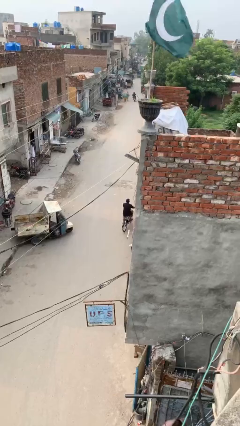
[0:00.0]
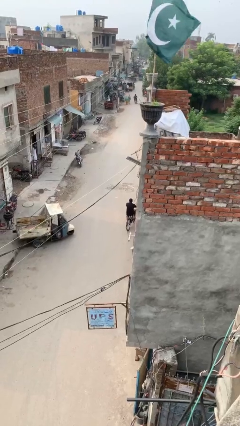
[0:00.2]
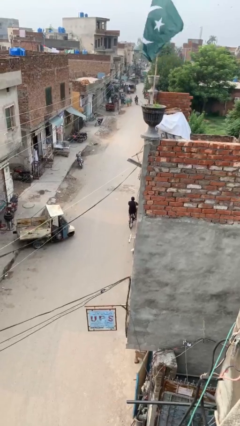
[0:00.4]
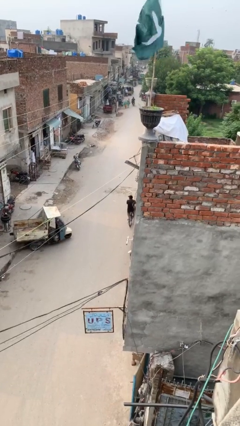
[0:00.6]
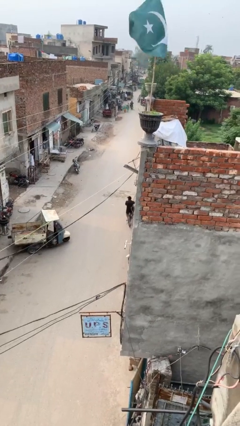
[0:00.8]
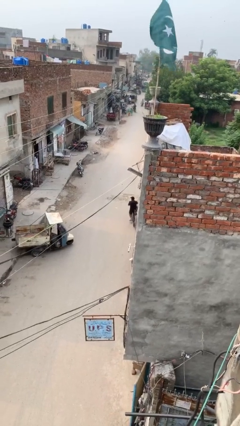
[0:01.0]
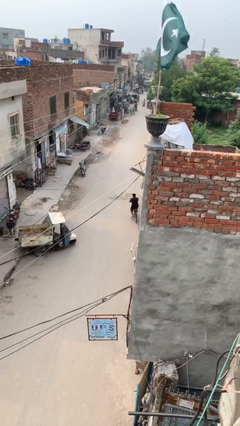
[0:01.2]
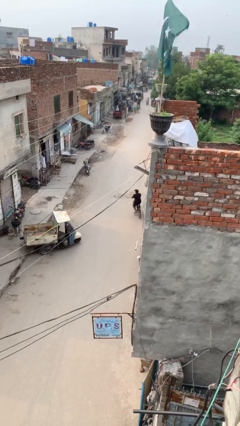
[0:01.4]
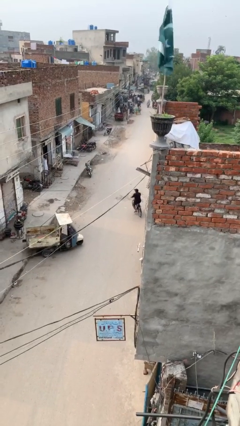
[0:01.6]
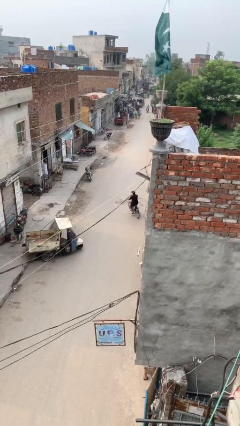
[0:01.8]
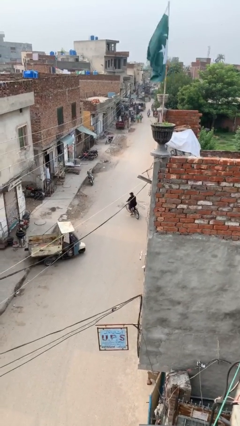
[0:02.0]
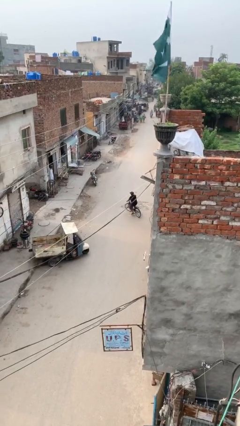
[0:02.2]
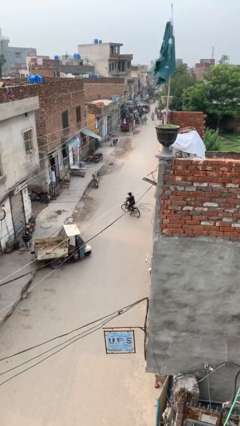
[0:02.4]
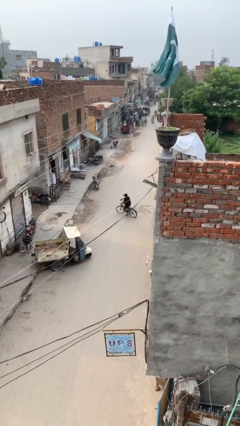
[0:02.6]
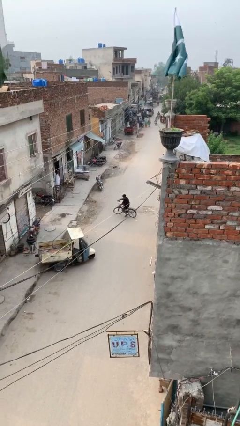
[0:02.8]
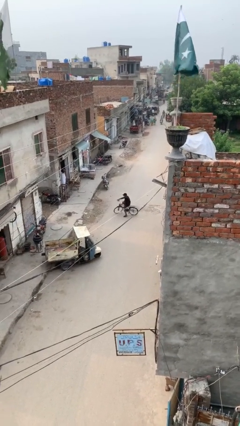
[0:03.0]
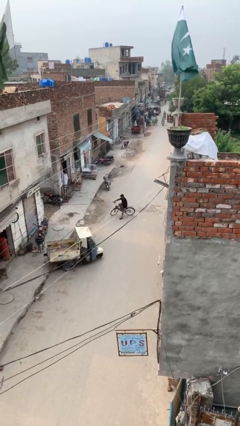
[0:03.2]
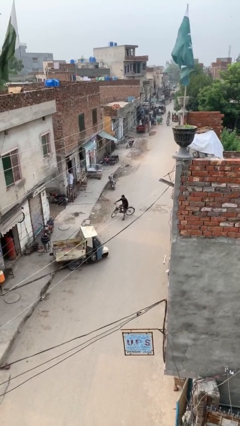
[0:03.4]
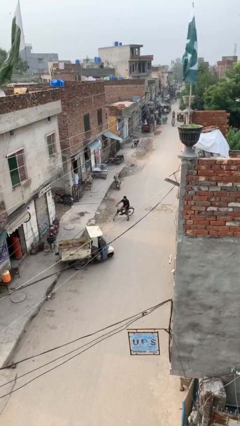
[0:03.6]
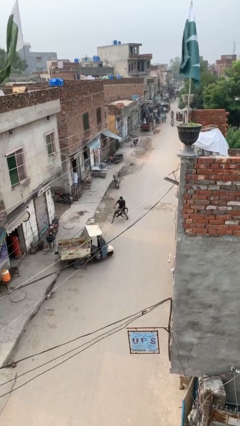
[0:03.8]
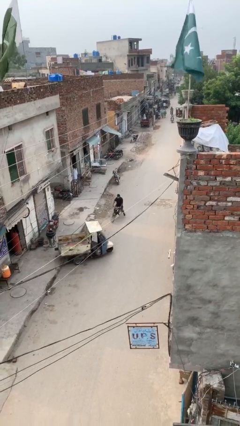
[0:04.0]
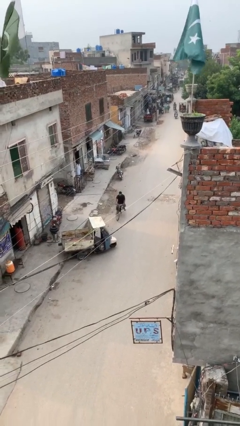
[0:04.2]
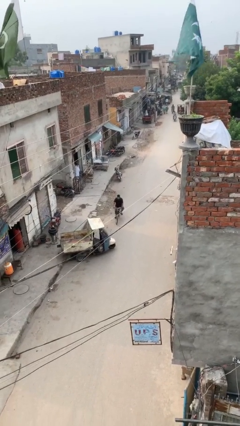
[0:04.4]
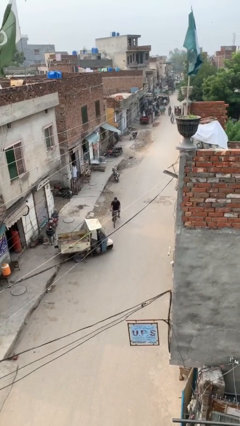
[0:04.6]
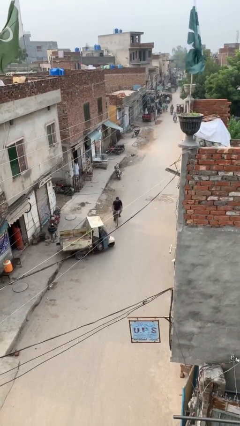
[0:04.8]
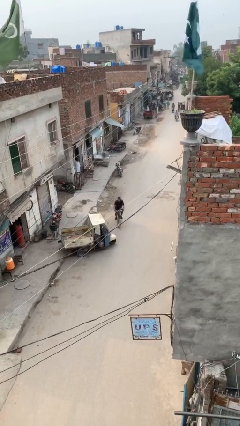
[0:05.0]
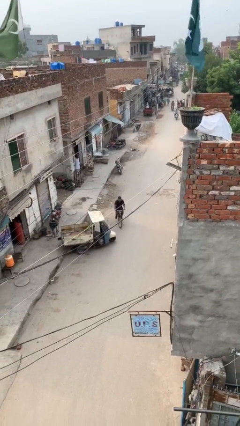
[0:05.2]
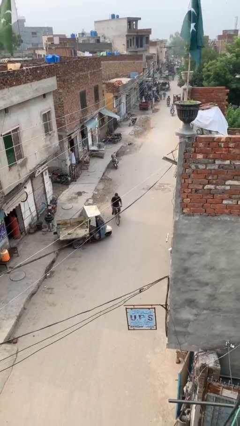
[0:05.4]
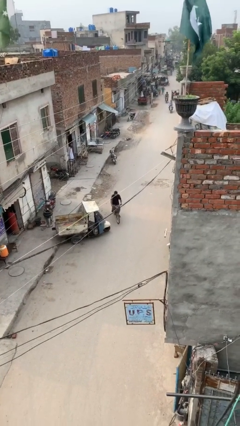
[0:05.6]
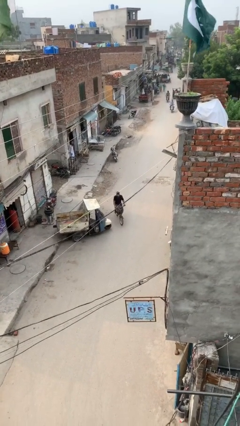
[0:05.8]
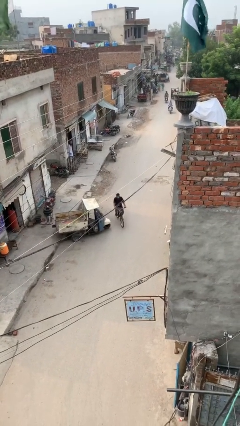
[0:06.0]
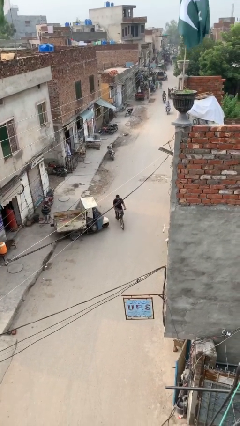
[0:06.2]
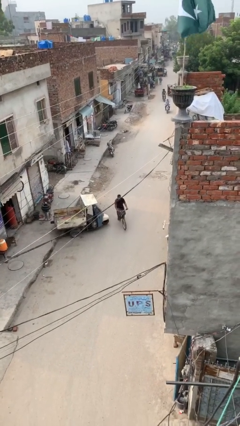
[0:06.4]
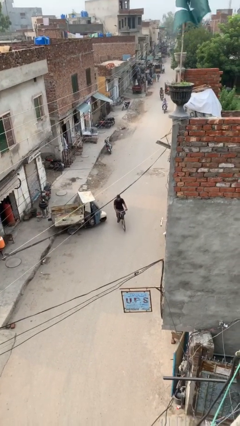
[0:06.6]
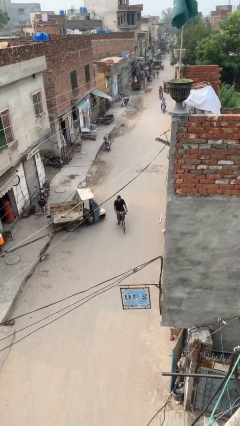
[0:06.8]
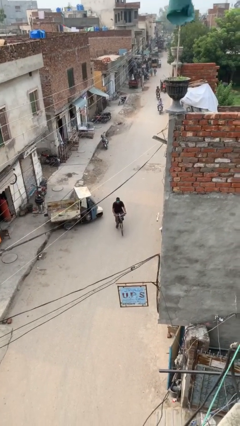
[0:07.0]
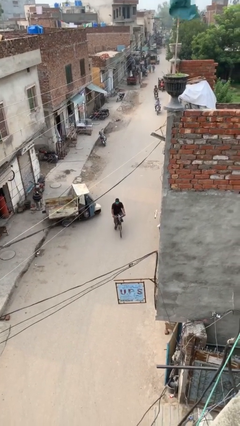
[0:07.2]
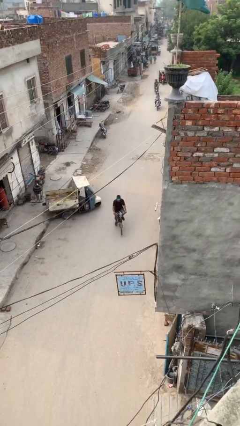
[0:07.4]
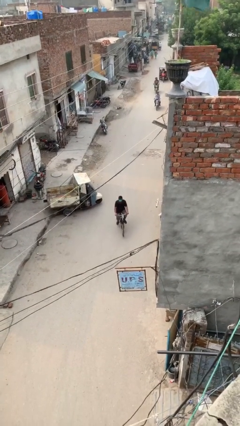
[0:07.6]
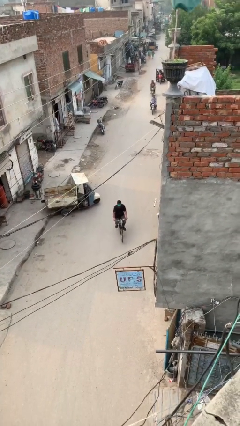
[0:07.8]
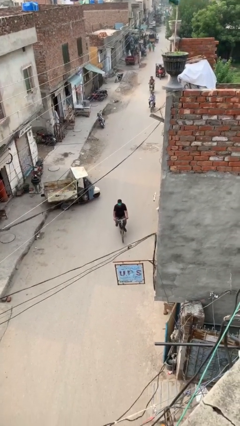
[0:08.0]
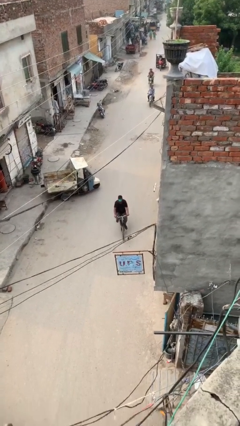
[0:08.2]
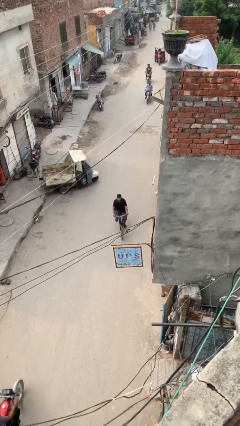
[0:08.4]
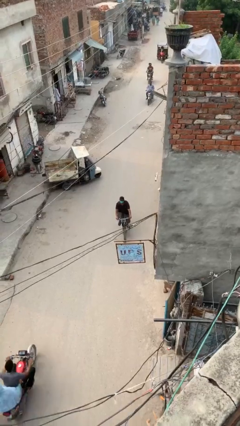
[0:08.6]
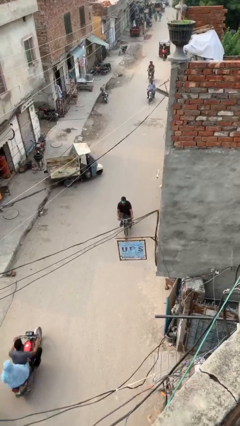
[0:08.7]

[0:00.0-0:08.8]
person rides bicycle

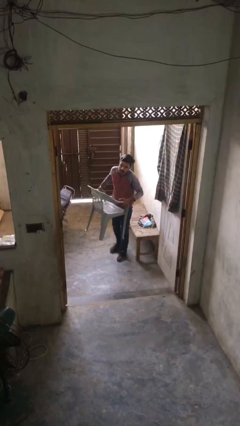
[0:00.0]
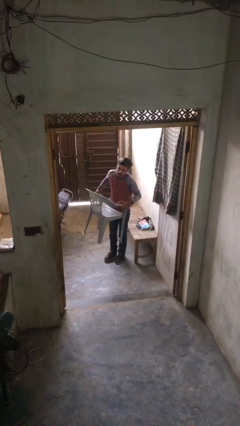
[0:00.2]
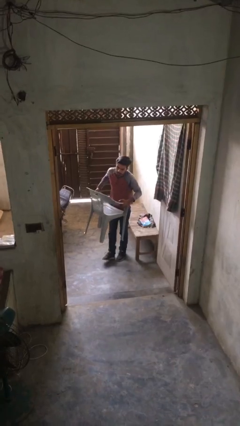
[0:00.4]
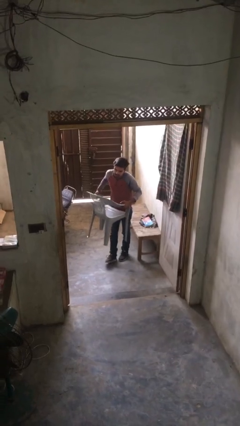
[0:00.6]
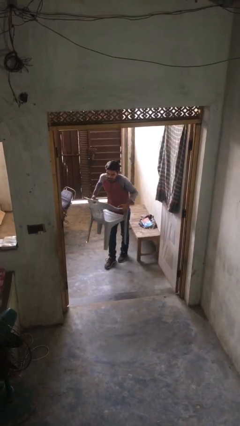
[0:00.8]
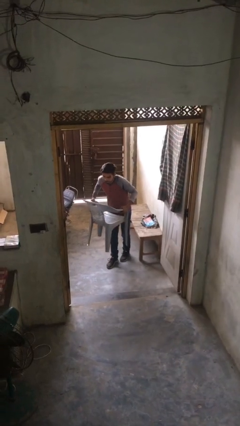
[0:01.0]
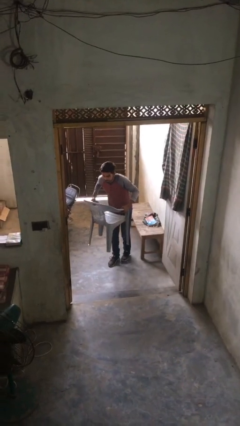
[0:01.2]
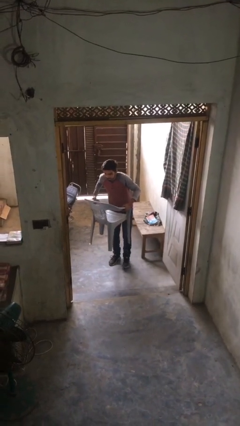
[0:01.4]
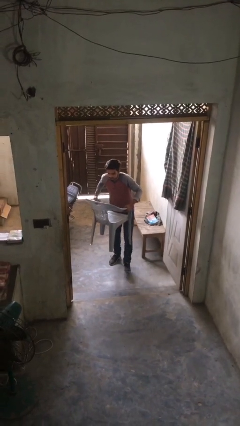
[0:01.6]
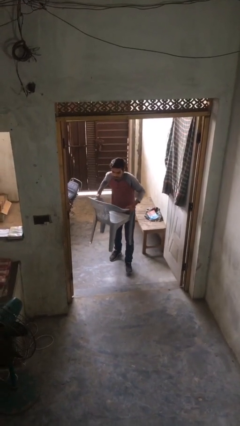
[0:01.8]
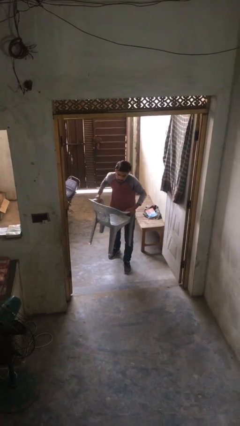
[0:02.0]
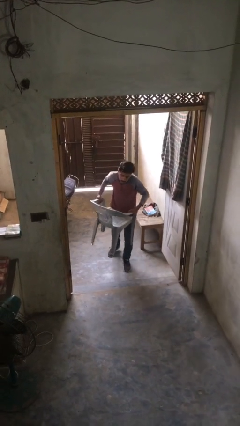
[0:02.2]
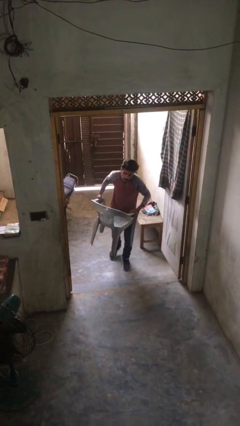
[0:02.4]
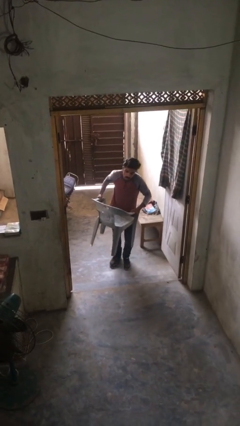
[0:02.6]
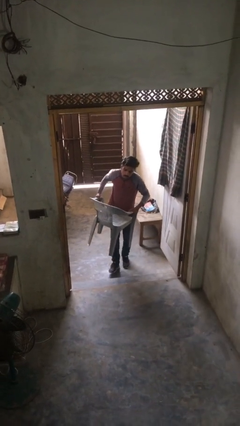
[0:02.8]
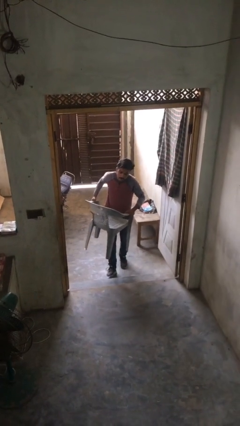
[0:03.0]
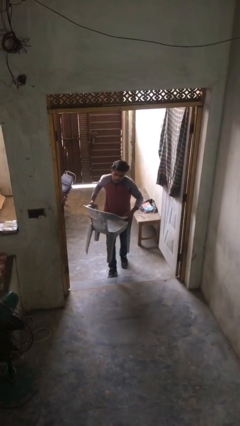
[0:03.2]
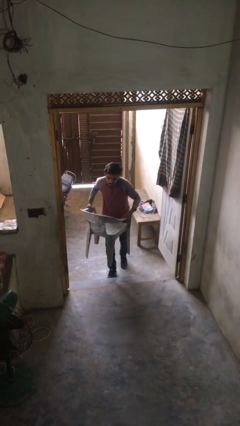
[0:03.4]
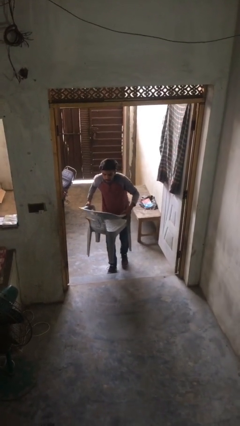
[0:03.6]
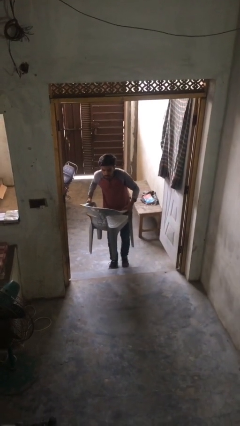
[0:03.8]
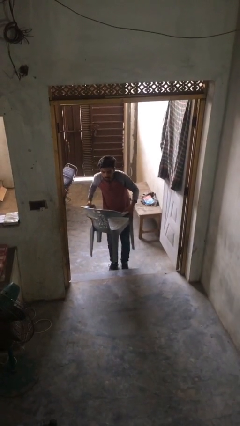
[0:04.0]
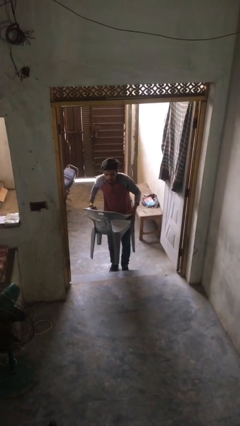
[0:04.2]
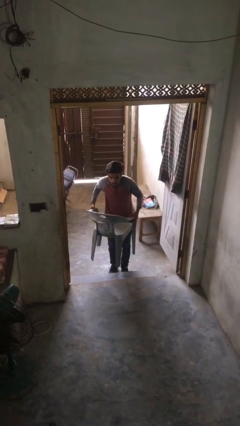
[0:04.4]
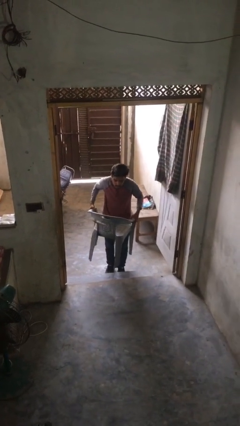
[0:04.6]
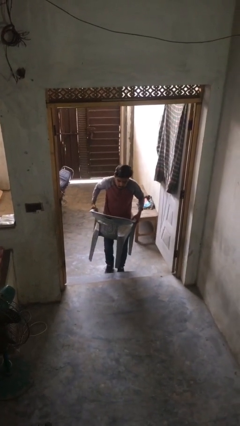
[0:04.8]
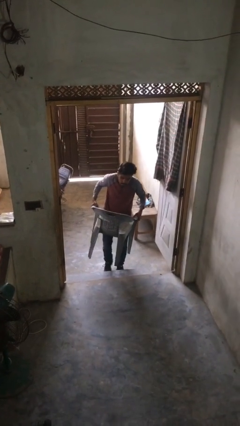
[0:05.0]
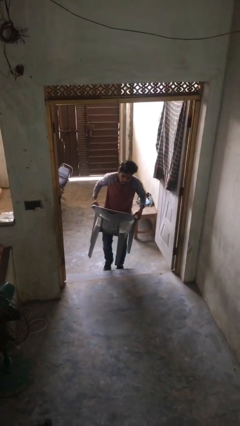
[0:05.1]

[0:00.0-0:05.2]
person carries heavy object

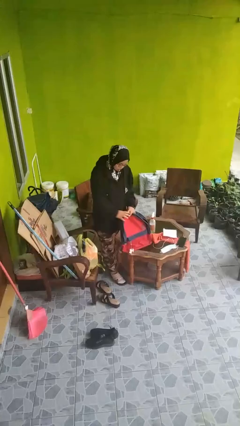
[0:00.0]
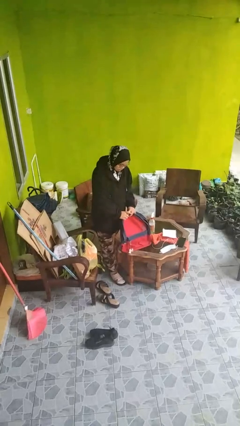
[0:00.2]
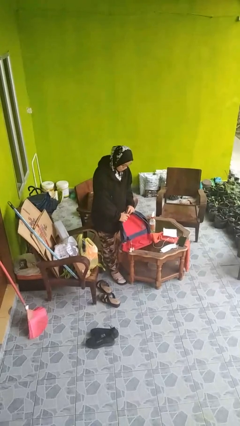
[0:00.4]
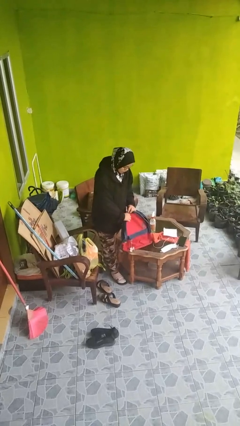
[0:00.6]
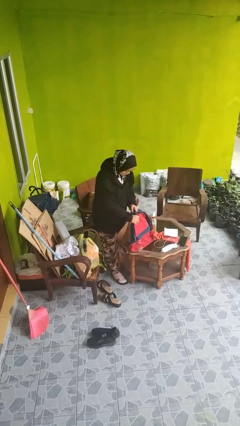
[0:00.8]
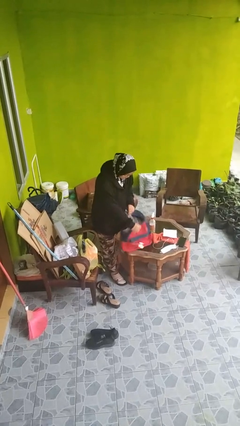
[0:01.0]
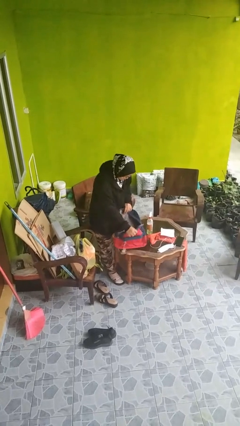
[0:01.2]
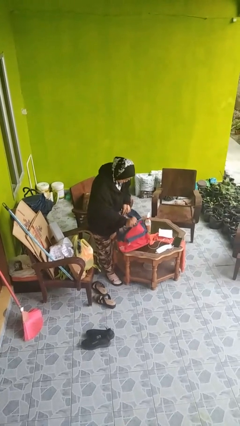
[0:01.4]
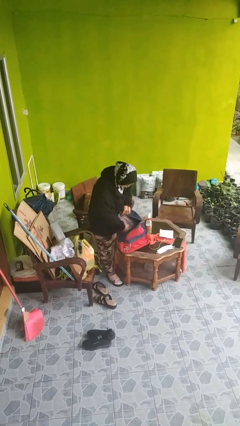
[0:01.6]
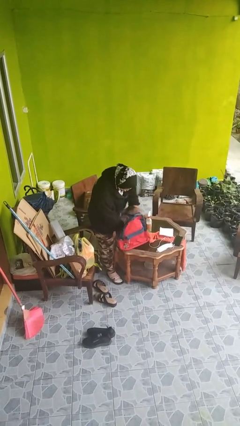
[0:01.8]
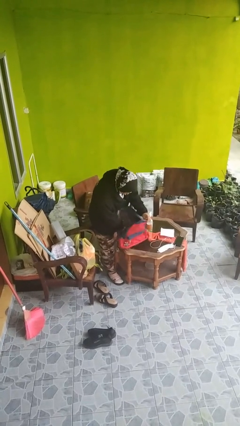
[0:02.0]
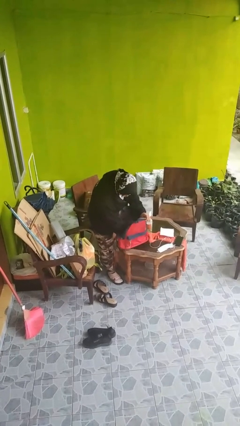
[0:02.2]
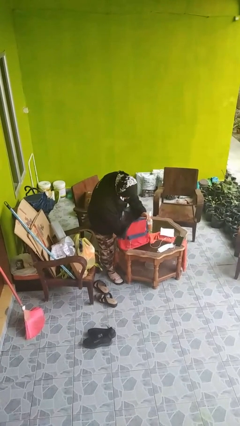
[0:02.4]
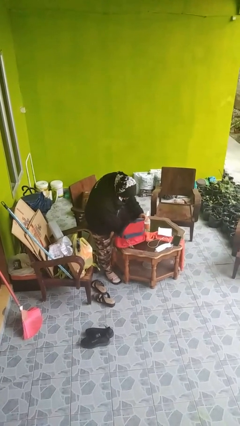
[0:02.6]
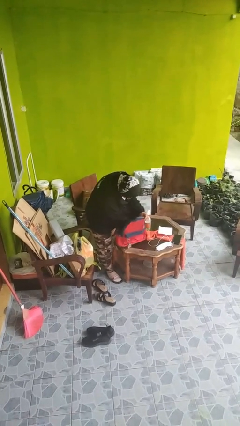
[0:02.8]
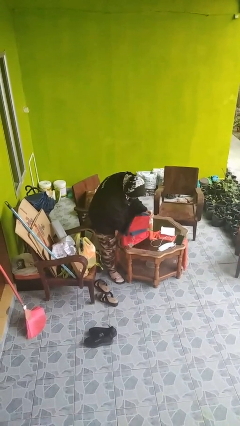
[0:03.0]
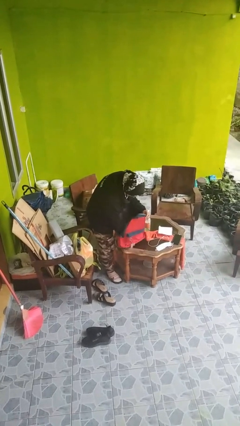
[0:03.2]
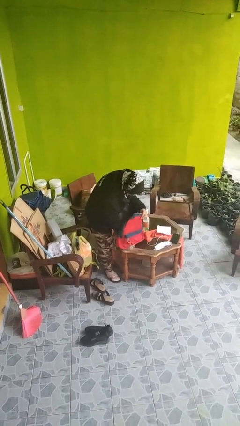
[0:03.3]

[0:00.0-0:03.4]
person searches in backpack

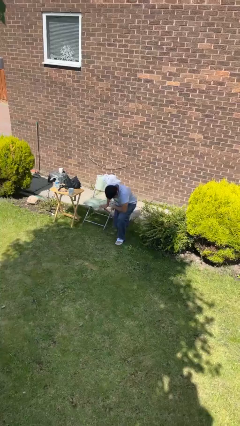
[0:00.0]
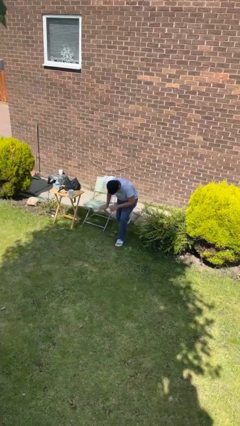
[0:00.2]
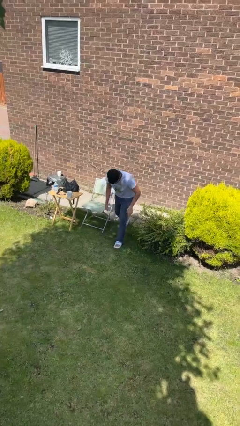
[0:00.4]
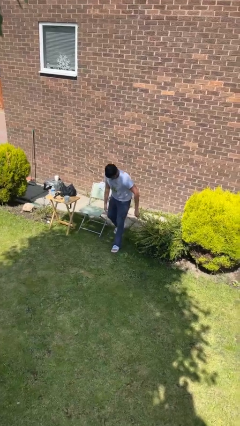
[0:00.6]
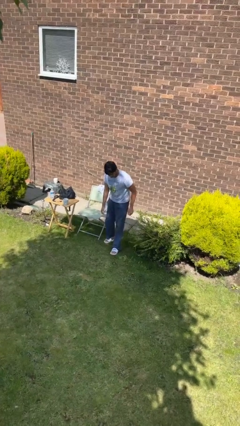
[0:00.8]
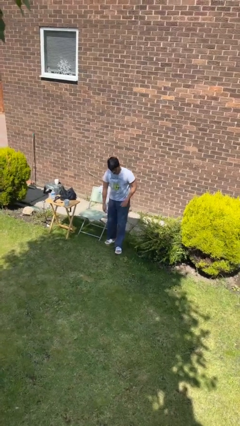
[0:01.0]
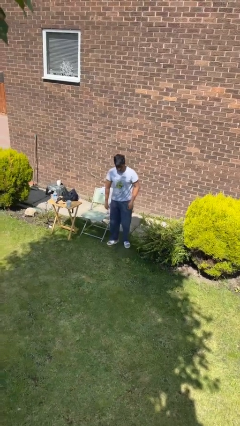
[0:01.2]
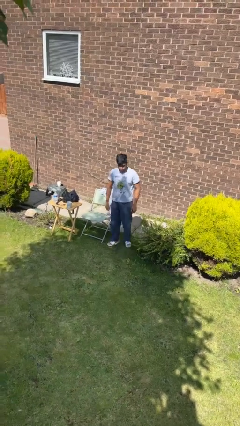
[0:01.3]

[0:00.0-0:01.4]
person stands up from floor
